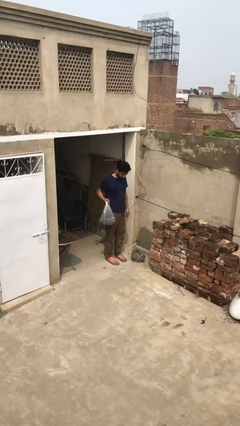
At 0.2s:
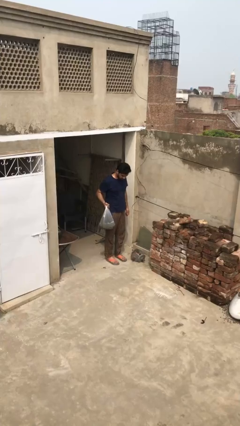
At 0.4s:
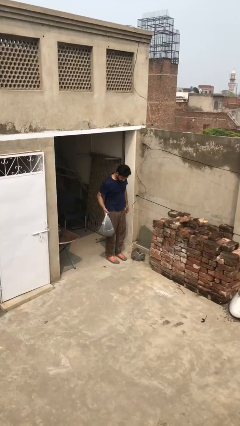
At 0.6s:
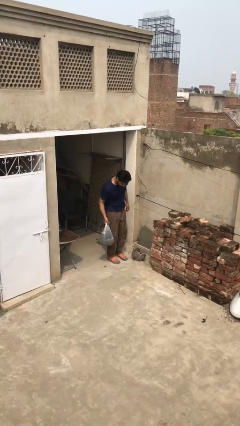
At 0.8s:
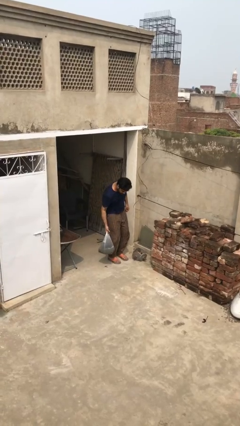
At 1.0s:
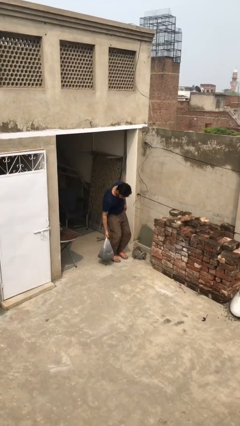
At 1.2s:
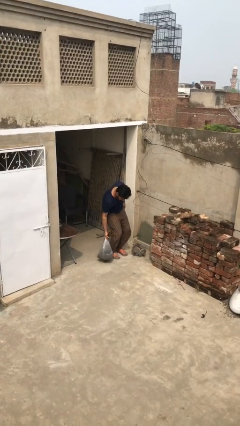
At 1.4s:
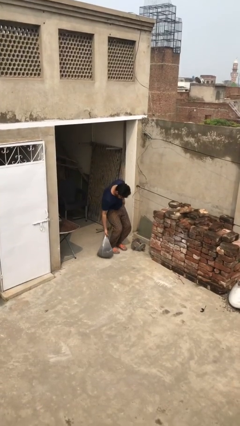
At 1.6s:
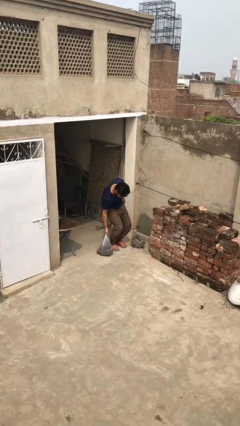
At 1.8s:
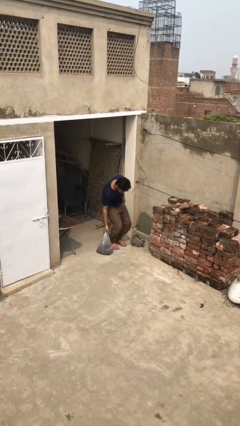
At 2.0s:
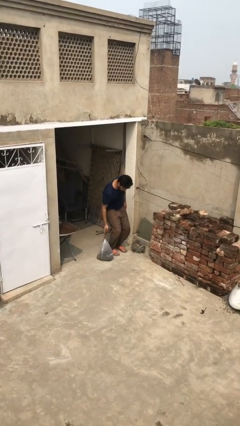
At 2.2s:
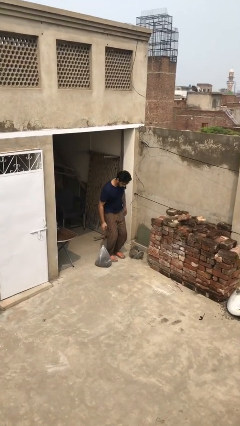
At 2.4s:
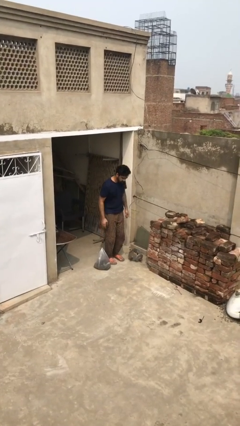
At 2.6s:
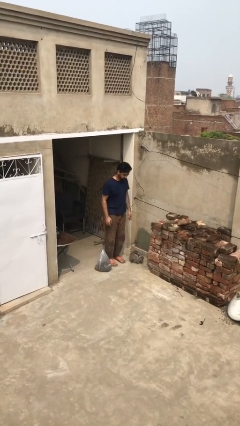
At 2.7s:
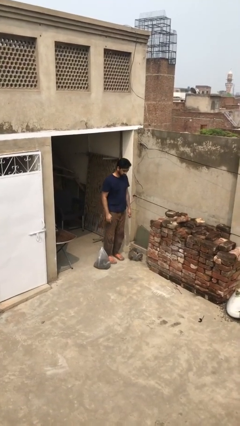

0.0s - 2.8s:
person puts down object on floor

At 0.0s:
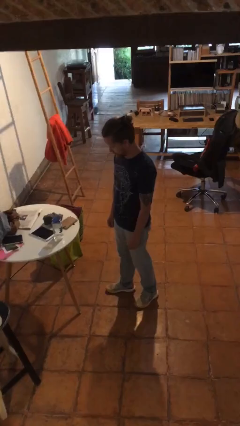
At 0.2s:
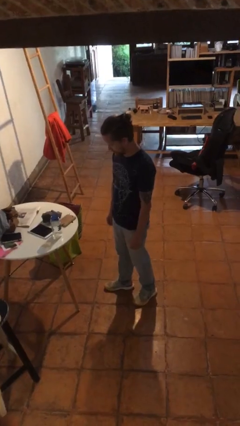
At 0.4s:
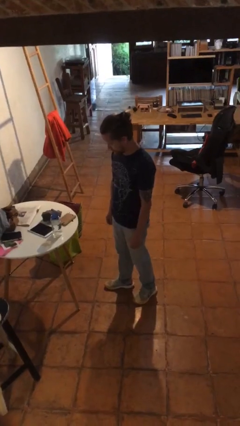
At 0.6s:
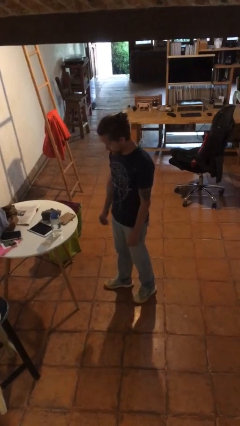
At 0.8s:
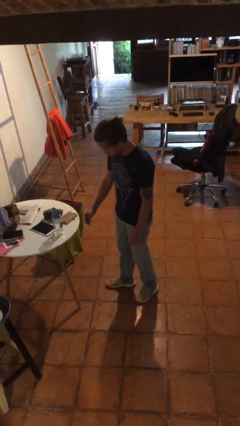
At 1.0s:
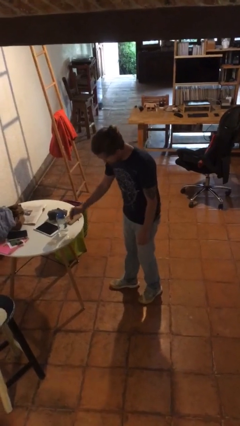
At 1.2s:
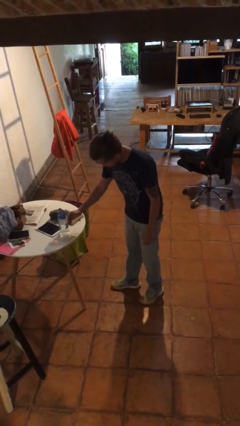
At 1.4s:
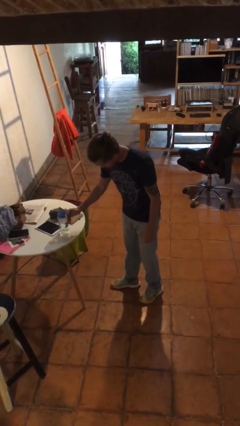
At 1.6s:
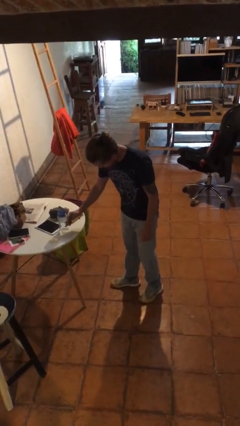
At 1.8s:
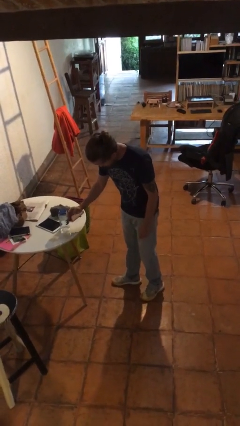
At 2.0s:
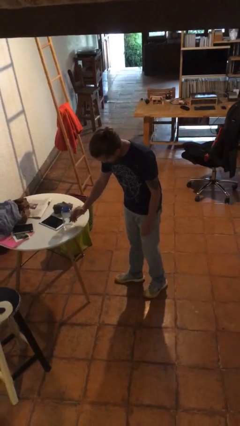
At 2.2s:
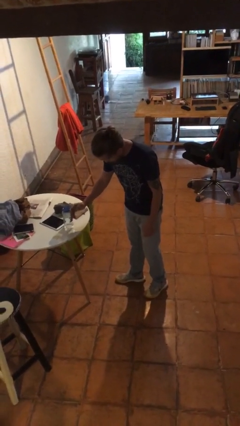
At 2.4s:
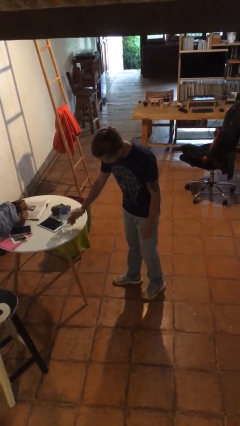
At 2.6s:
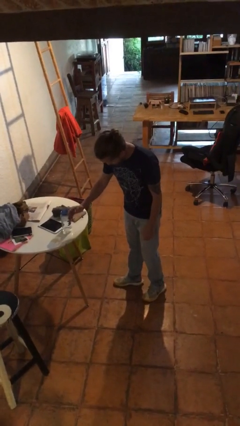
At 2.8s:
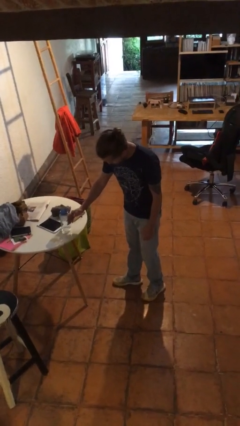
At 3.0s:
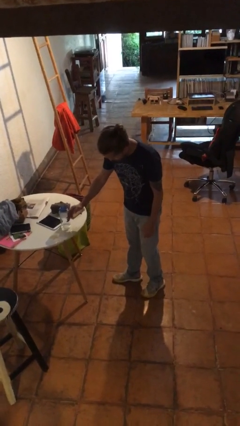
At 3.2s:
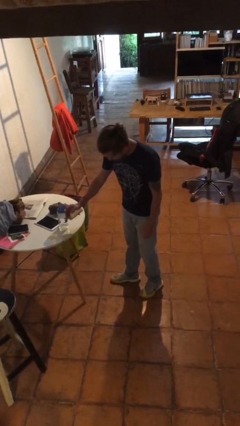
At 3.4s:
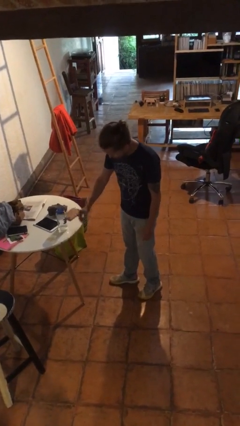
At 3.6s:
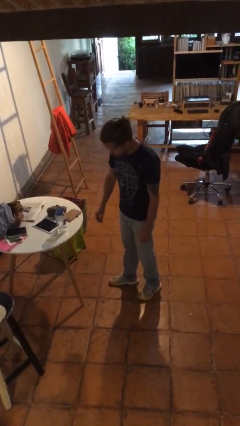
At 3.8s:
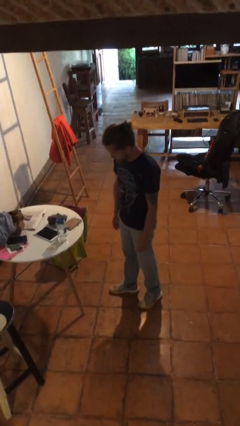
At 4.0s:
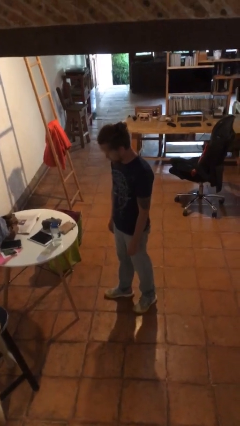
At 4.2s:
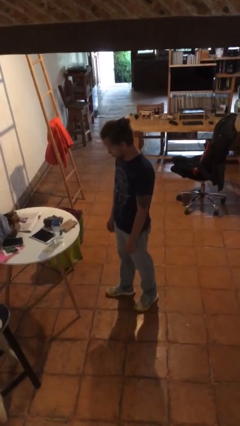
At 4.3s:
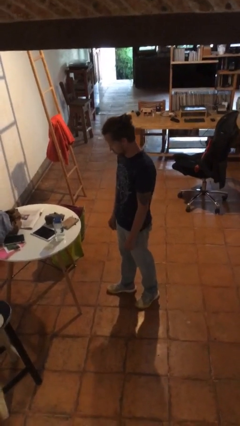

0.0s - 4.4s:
person waves hand over object

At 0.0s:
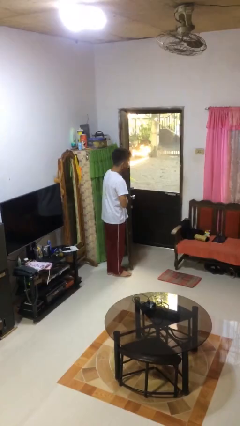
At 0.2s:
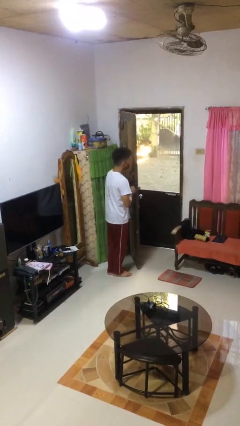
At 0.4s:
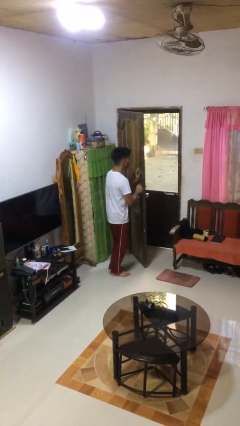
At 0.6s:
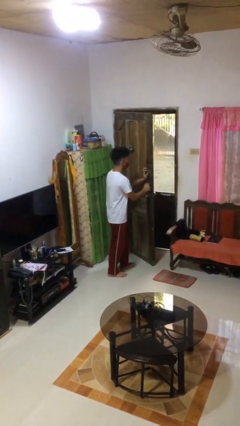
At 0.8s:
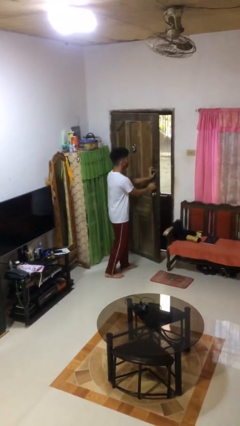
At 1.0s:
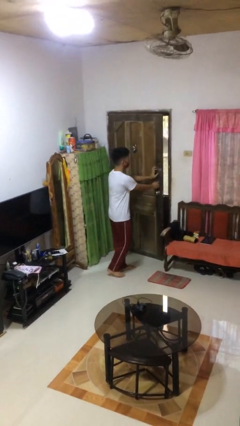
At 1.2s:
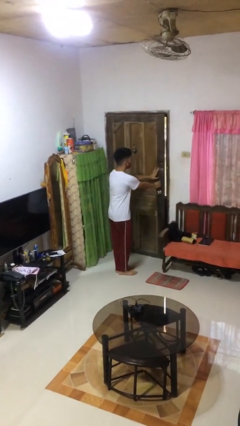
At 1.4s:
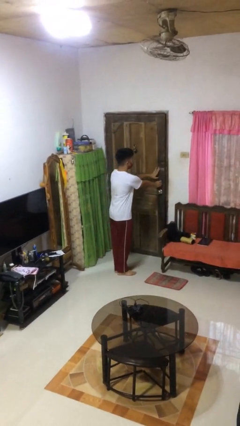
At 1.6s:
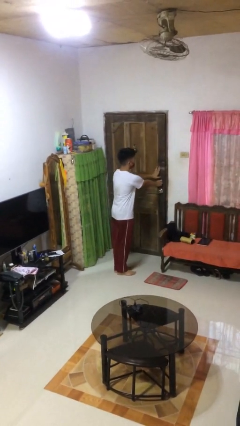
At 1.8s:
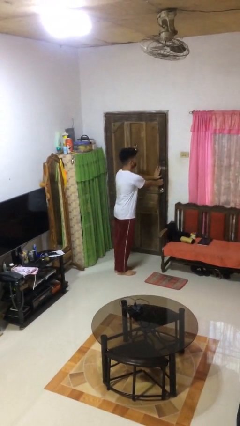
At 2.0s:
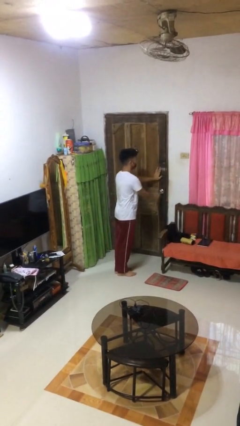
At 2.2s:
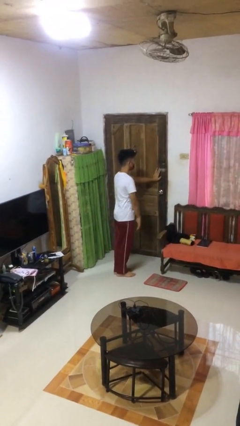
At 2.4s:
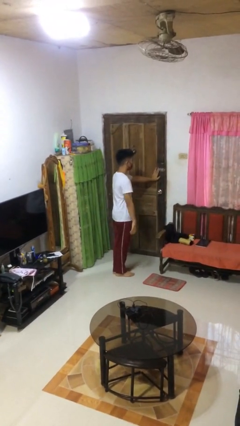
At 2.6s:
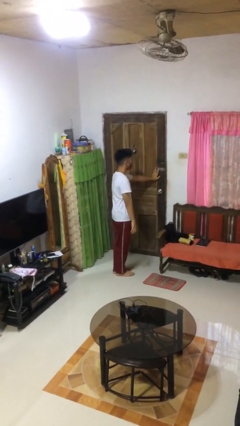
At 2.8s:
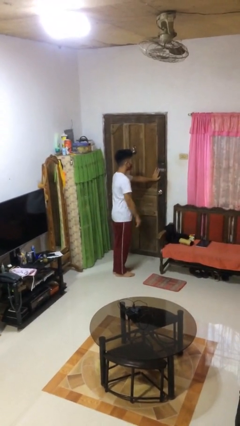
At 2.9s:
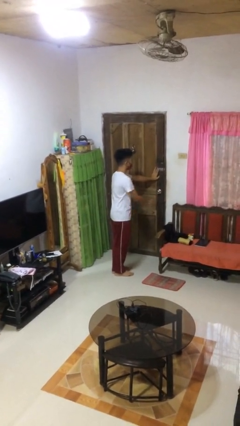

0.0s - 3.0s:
person closes facility door

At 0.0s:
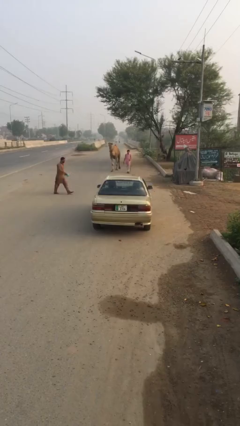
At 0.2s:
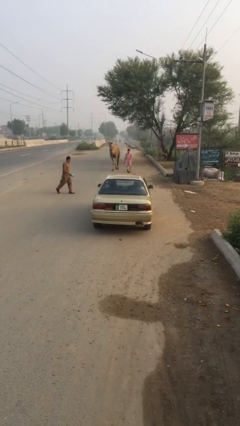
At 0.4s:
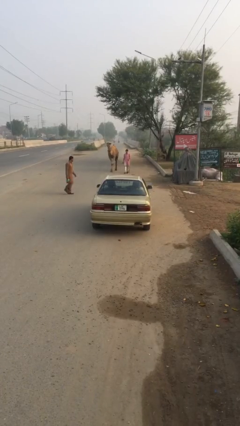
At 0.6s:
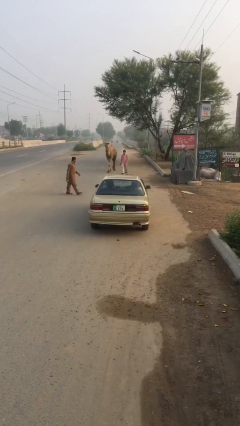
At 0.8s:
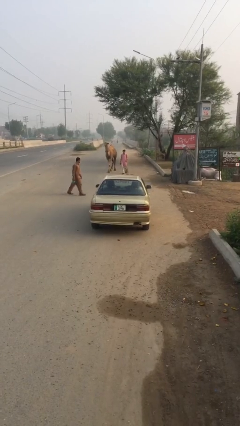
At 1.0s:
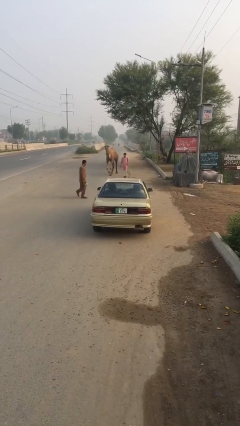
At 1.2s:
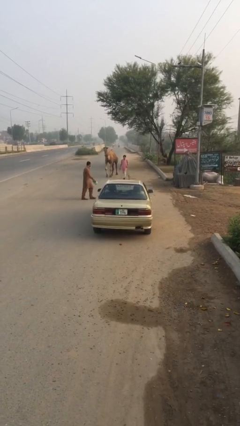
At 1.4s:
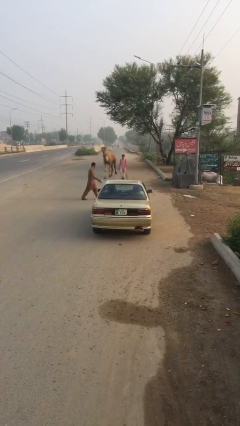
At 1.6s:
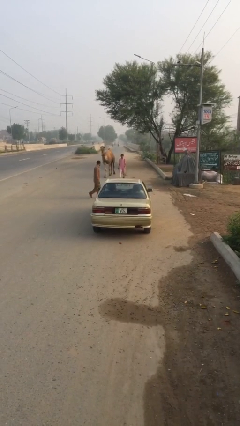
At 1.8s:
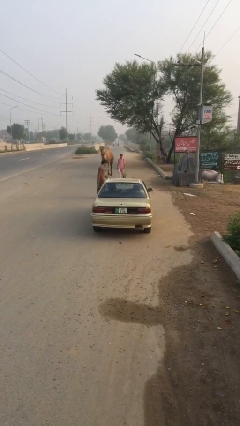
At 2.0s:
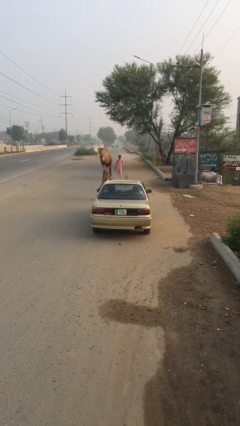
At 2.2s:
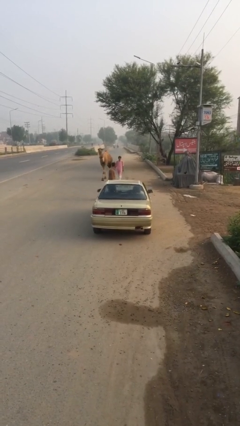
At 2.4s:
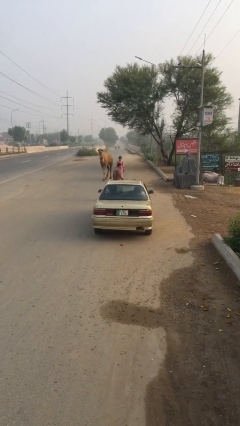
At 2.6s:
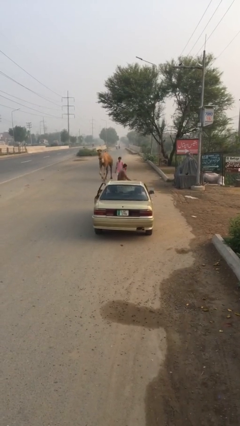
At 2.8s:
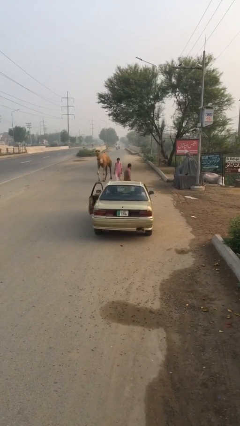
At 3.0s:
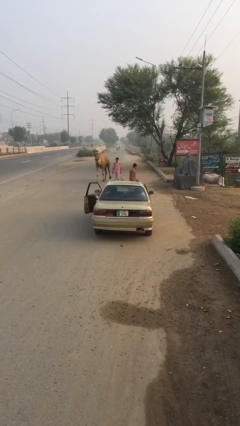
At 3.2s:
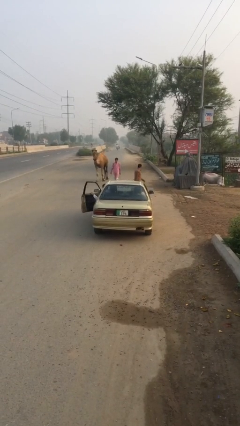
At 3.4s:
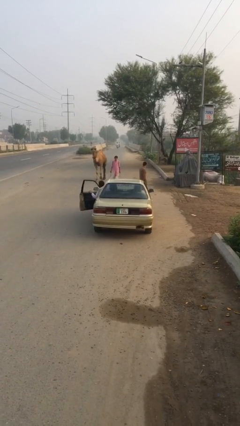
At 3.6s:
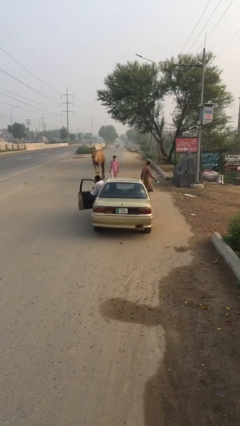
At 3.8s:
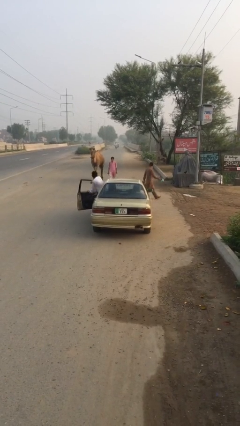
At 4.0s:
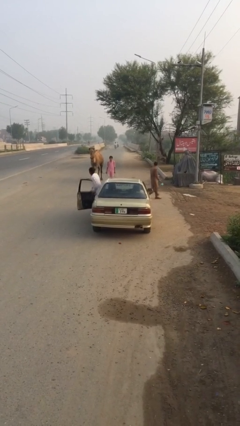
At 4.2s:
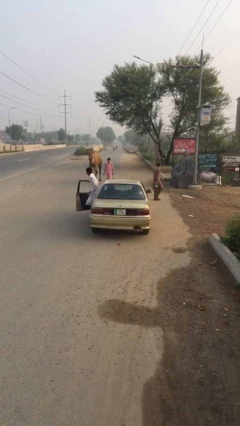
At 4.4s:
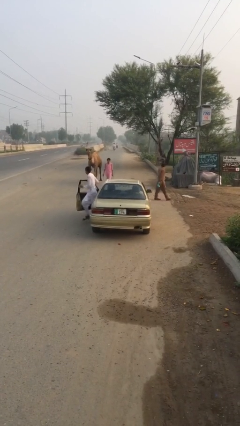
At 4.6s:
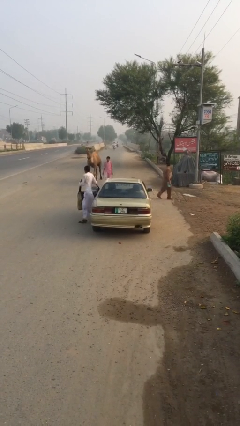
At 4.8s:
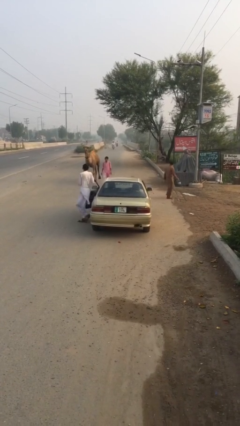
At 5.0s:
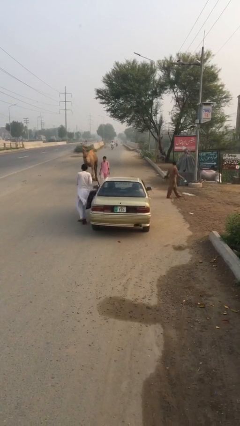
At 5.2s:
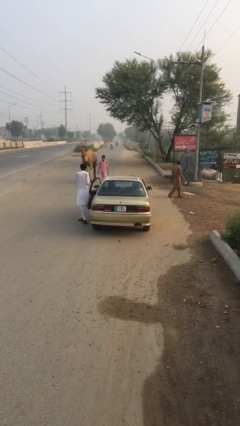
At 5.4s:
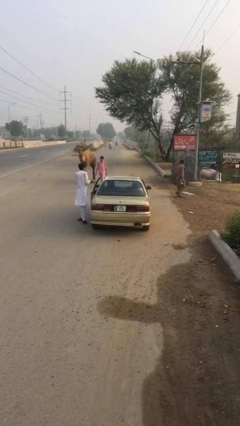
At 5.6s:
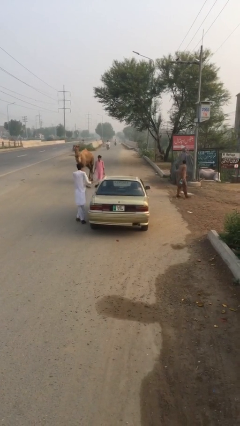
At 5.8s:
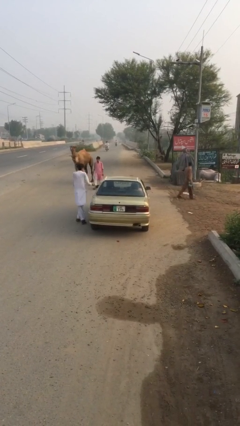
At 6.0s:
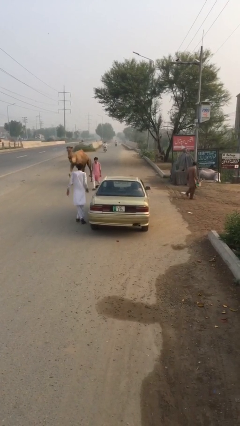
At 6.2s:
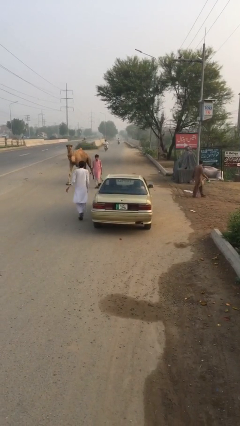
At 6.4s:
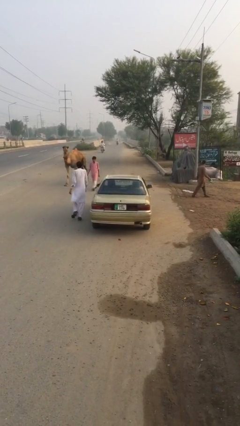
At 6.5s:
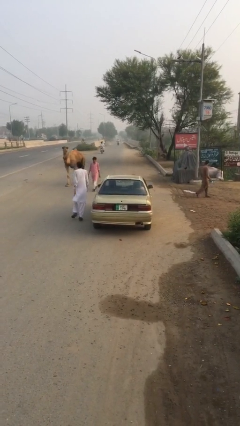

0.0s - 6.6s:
car drops off person

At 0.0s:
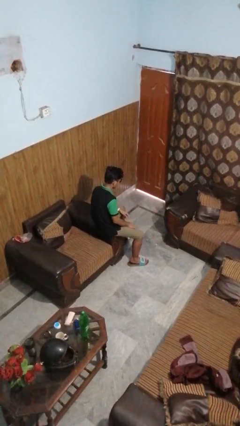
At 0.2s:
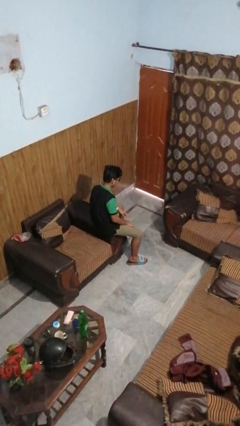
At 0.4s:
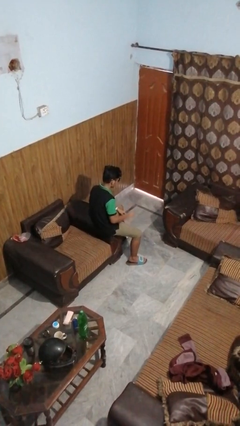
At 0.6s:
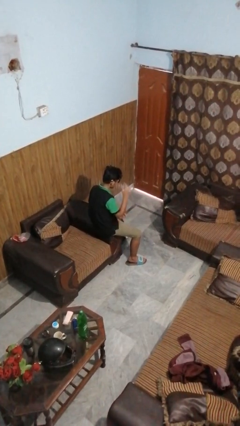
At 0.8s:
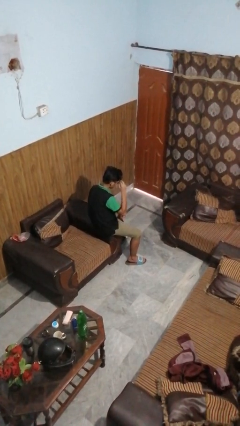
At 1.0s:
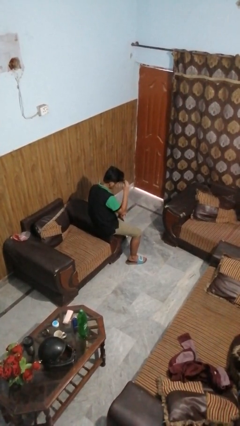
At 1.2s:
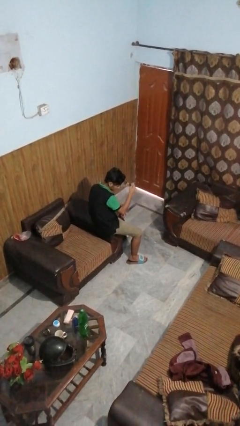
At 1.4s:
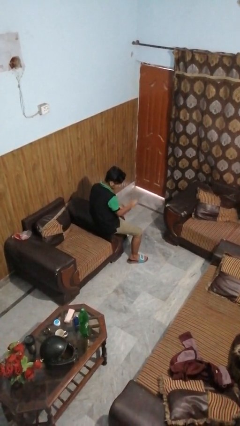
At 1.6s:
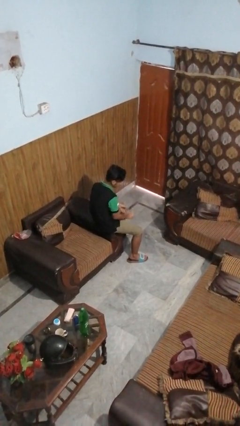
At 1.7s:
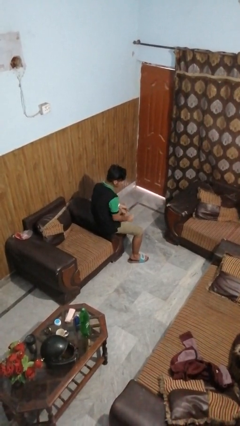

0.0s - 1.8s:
person takes off sunglasses
